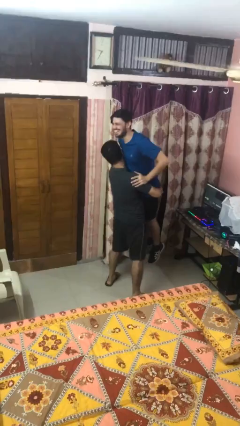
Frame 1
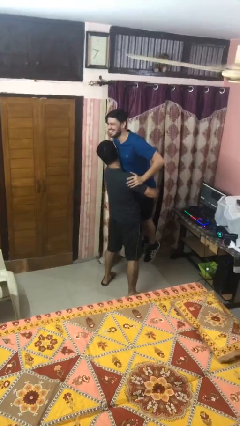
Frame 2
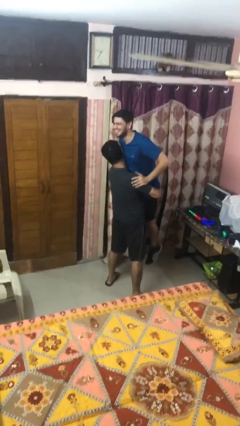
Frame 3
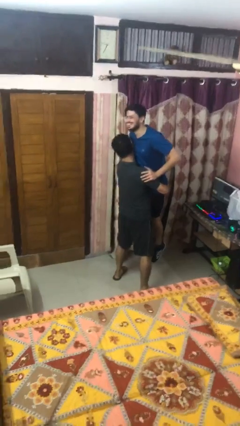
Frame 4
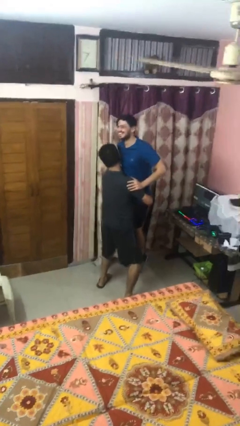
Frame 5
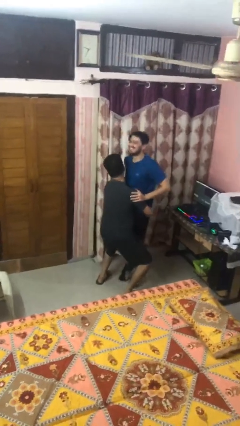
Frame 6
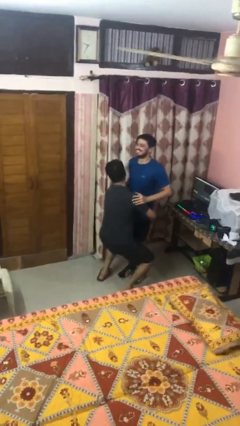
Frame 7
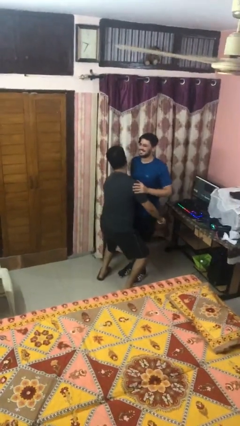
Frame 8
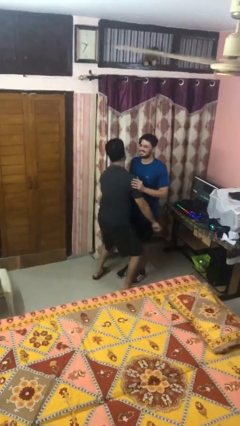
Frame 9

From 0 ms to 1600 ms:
person puts down person

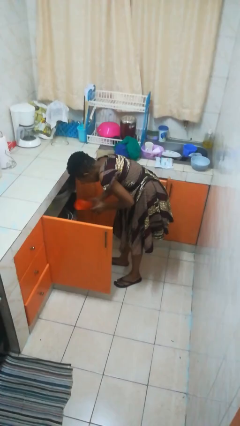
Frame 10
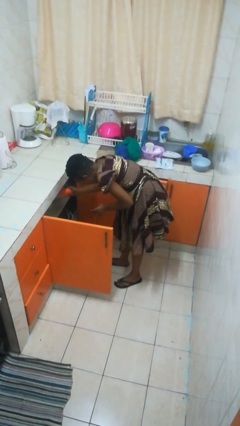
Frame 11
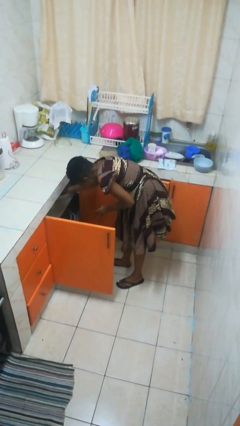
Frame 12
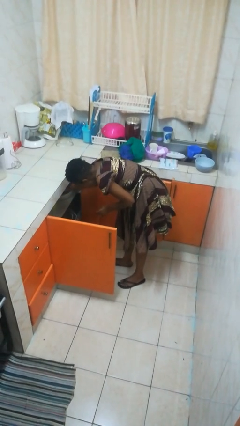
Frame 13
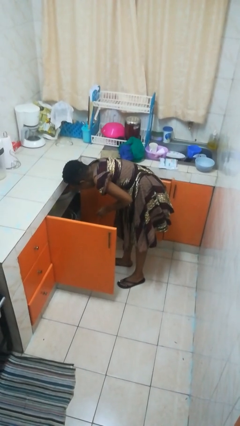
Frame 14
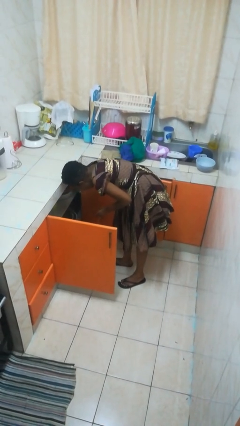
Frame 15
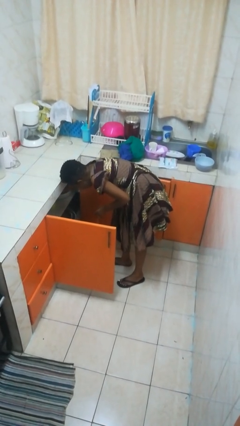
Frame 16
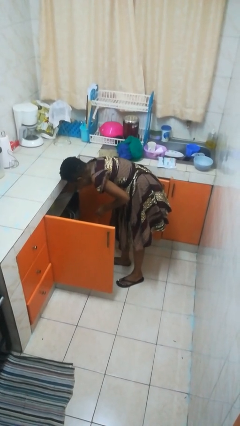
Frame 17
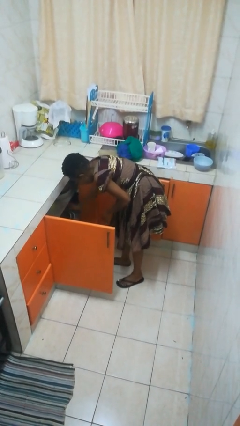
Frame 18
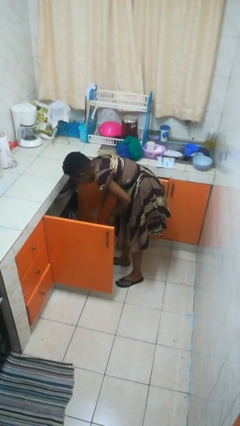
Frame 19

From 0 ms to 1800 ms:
person puts object in cabinet

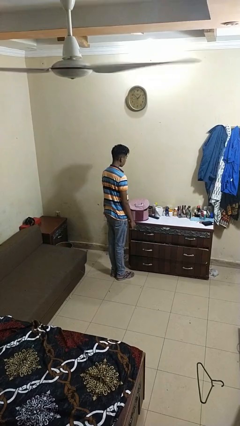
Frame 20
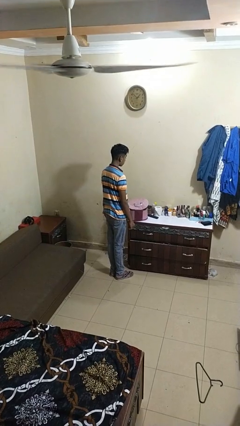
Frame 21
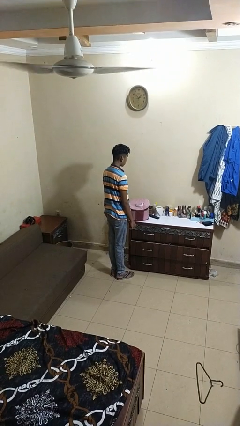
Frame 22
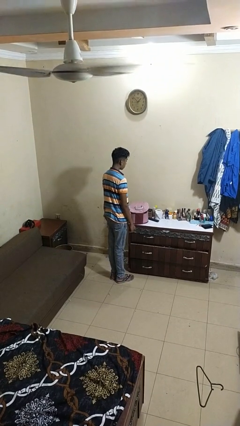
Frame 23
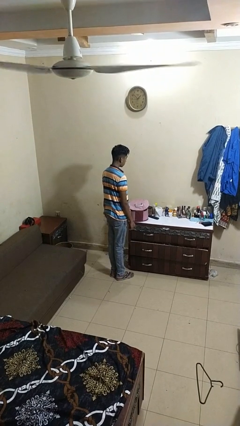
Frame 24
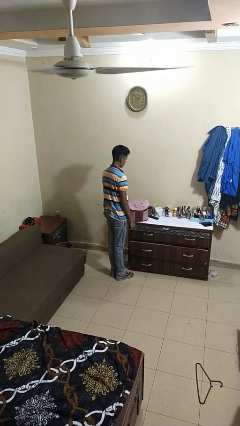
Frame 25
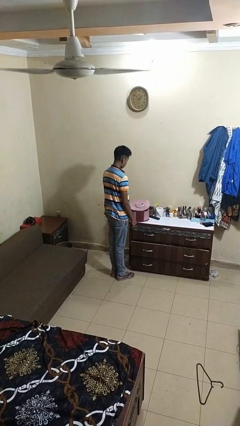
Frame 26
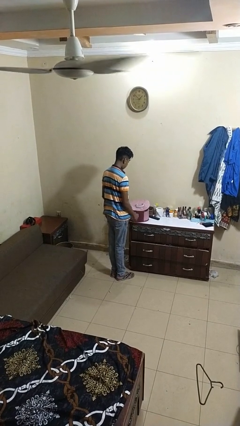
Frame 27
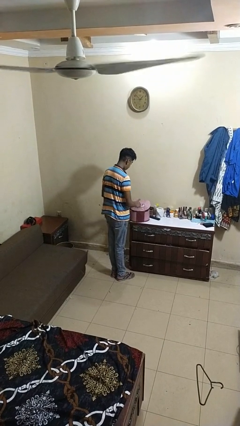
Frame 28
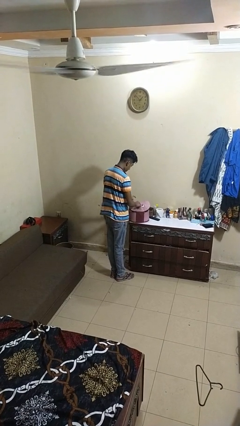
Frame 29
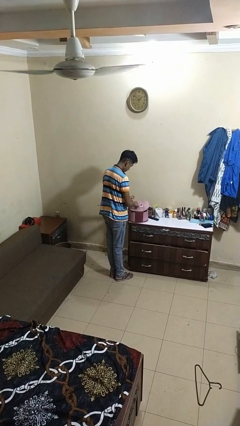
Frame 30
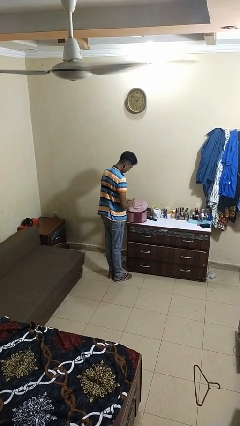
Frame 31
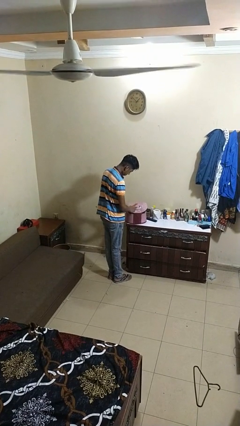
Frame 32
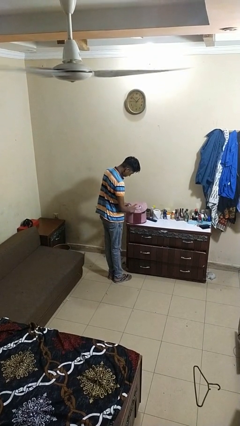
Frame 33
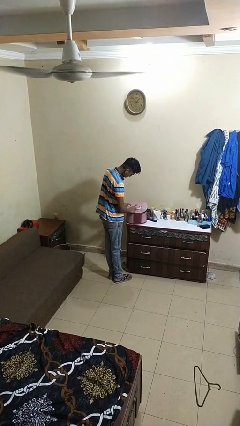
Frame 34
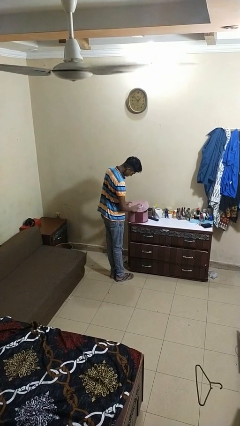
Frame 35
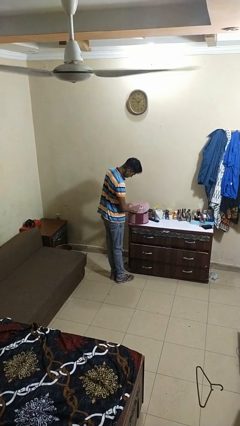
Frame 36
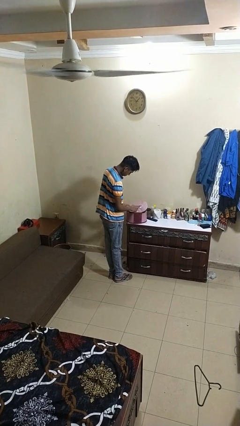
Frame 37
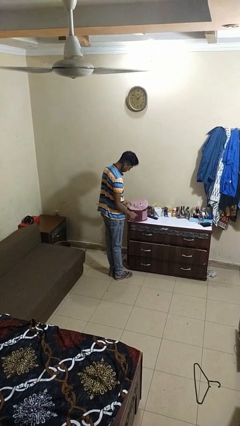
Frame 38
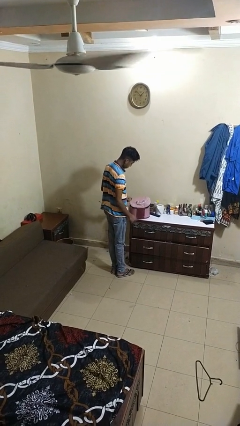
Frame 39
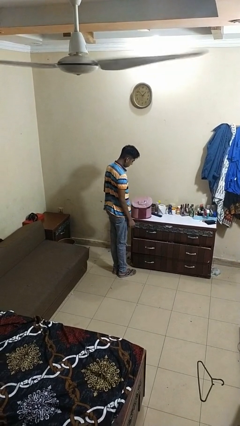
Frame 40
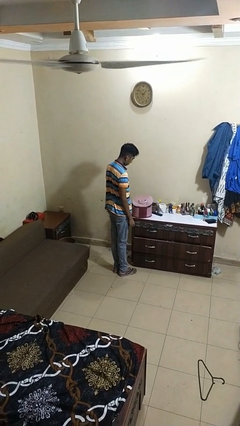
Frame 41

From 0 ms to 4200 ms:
person taps object with finger

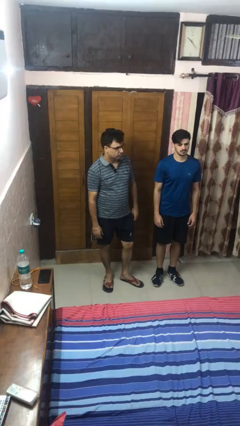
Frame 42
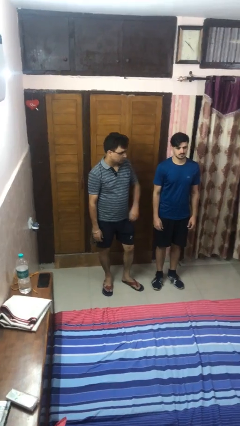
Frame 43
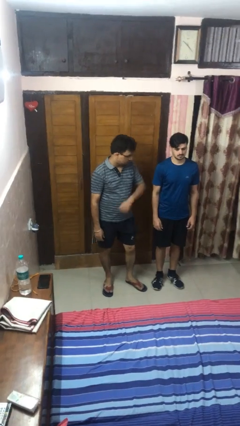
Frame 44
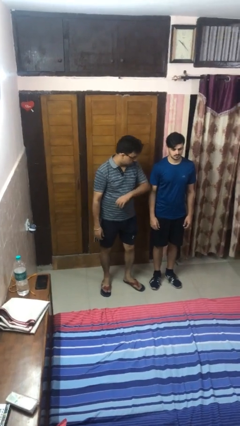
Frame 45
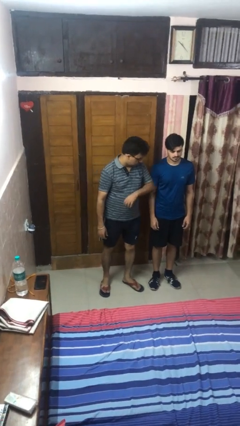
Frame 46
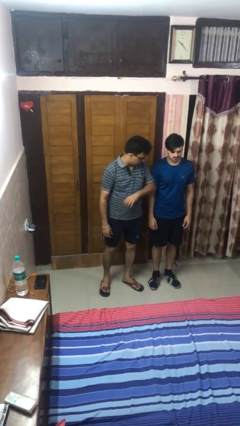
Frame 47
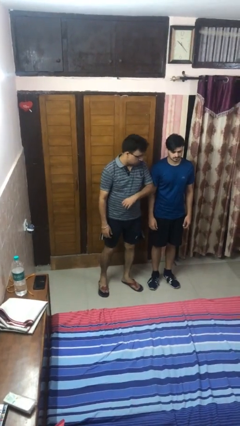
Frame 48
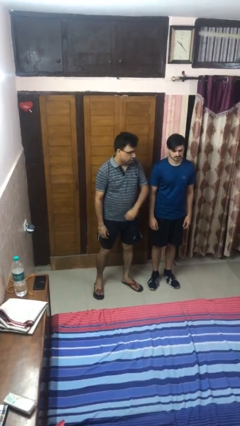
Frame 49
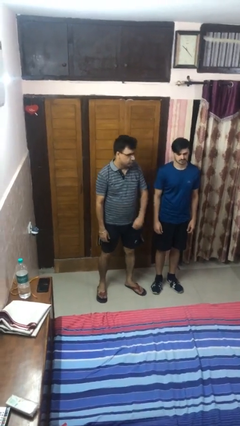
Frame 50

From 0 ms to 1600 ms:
person nudges person with elbow

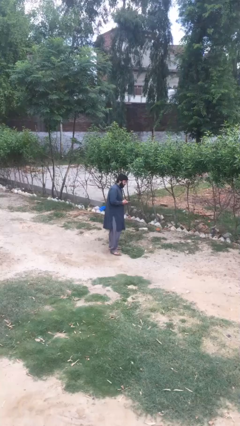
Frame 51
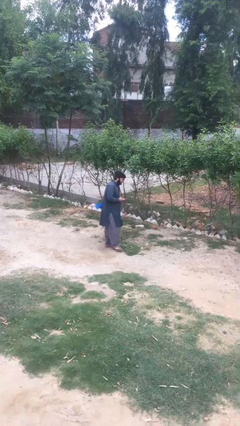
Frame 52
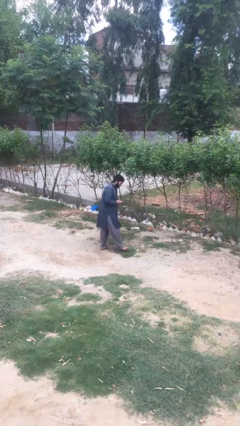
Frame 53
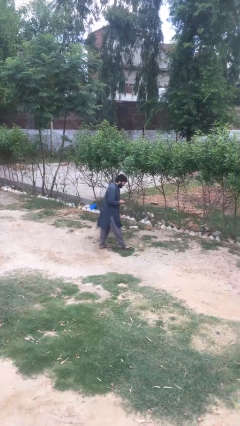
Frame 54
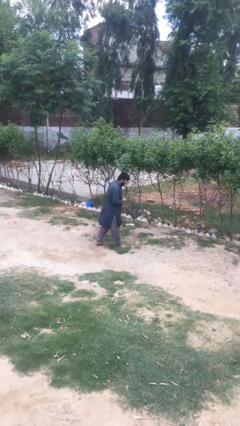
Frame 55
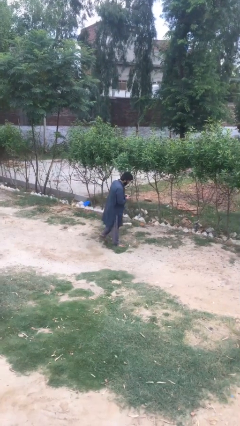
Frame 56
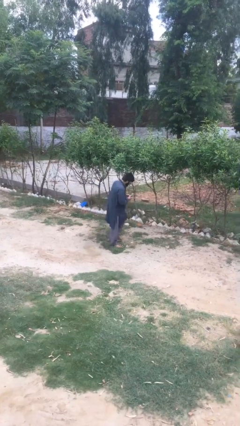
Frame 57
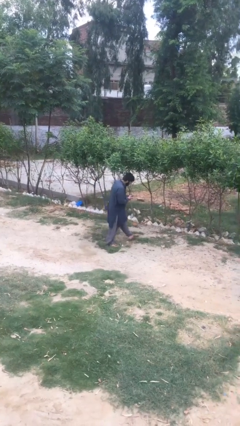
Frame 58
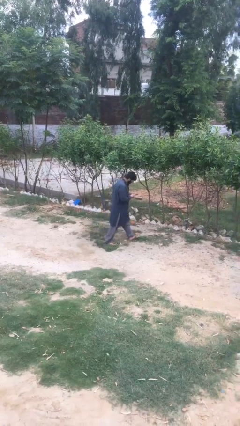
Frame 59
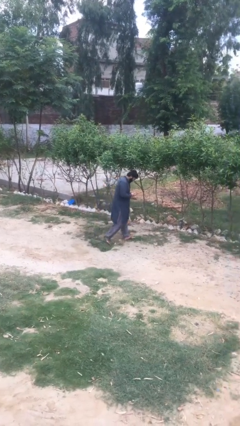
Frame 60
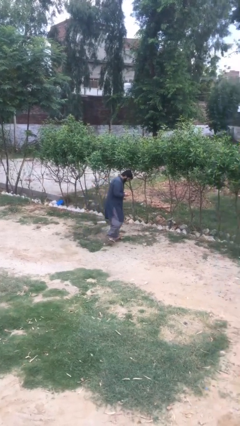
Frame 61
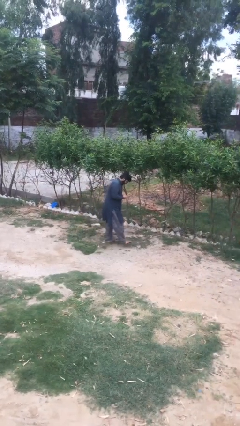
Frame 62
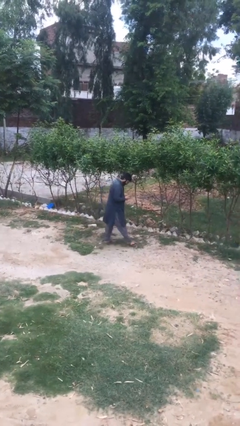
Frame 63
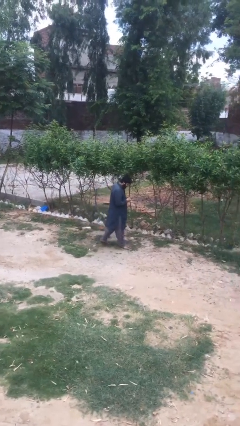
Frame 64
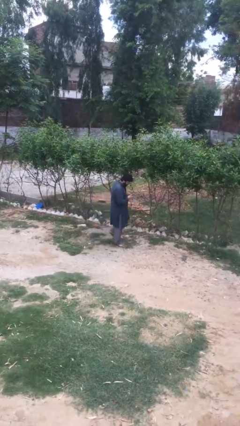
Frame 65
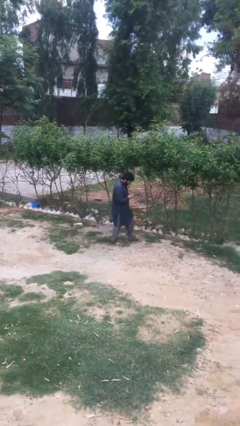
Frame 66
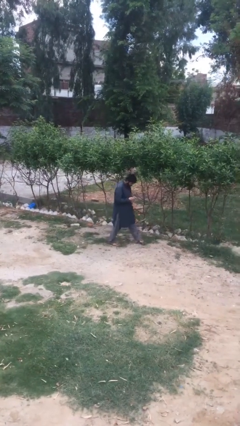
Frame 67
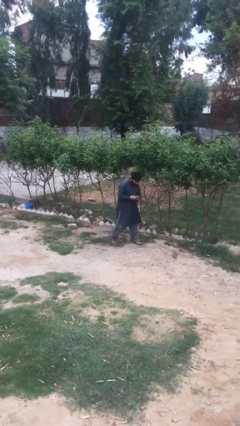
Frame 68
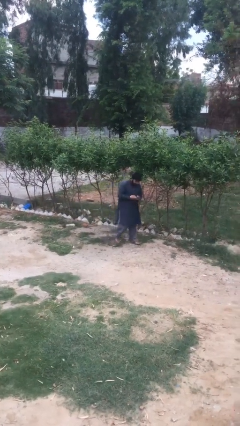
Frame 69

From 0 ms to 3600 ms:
person texts on phone

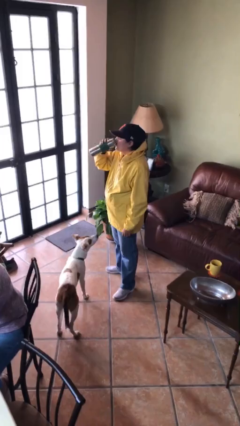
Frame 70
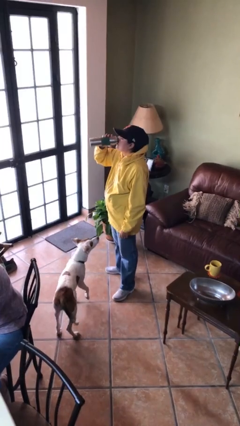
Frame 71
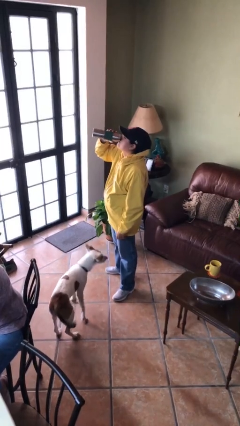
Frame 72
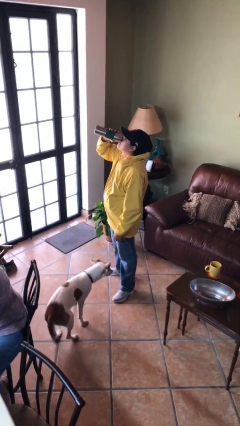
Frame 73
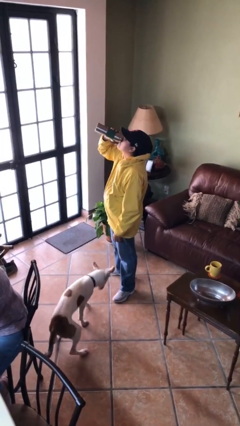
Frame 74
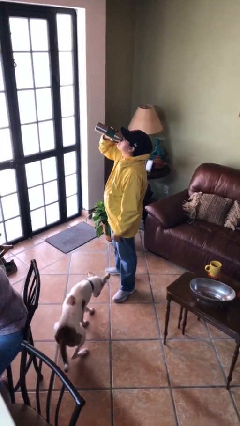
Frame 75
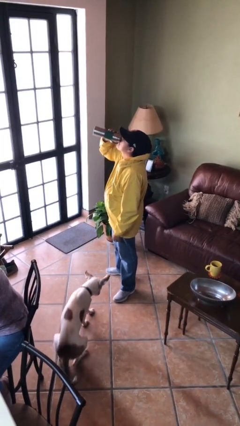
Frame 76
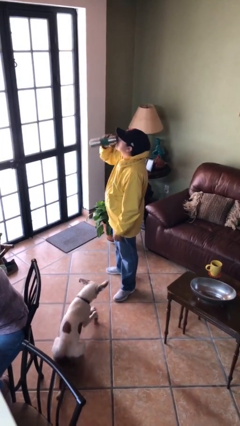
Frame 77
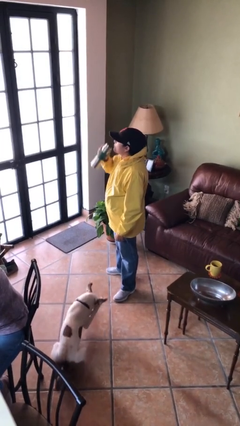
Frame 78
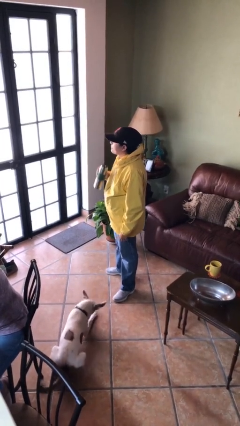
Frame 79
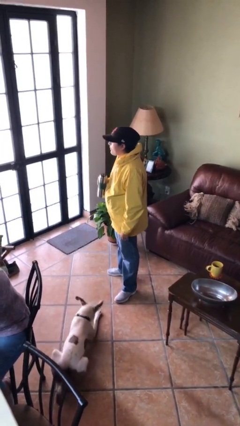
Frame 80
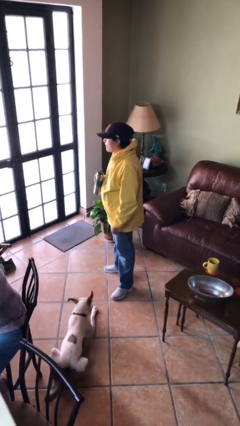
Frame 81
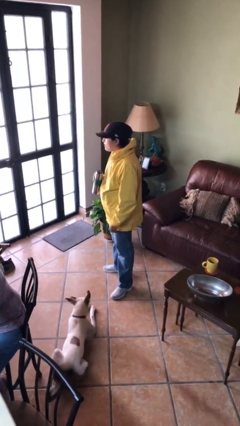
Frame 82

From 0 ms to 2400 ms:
person drinks from bottle

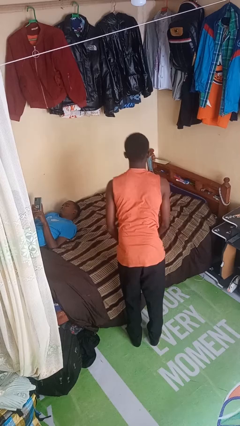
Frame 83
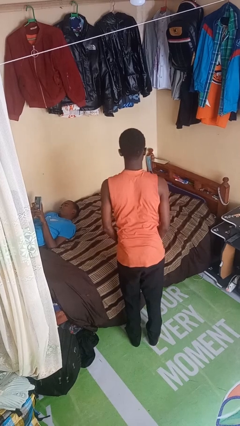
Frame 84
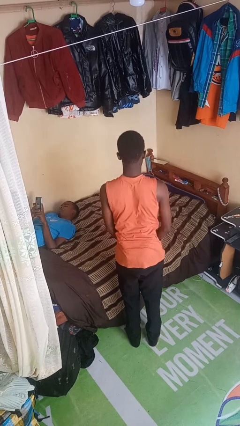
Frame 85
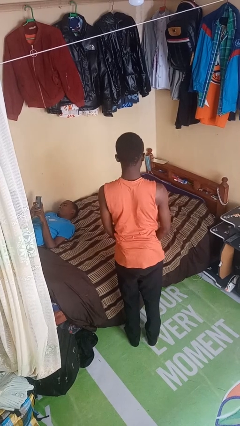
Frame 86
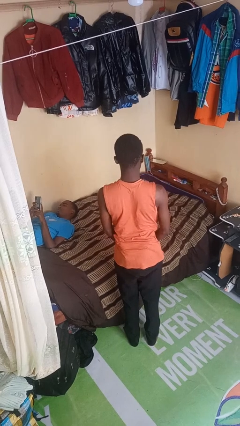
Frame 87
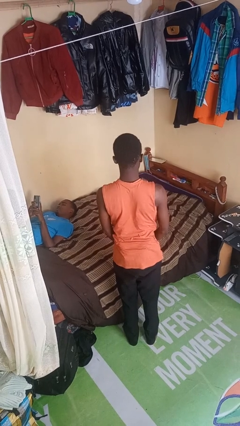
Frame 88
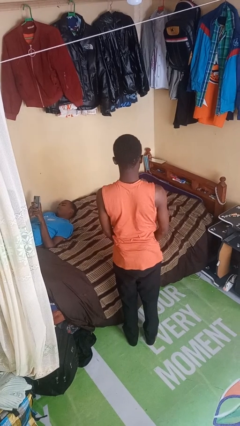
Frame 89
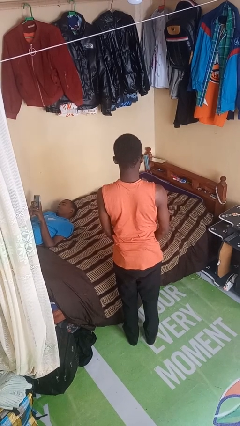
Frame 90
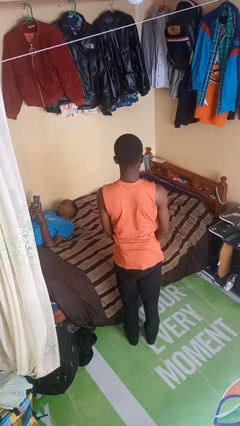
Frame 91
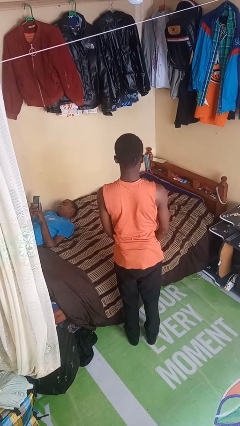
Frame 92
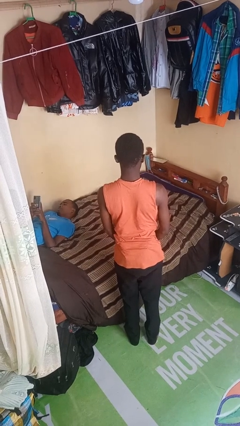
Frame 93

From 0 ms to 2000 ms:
person stands up
